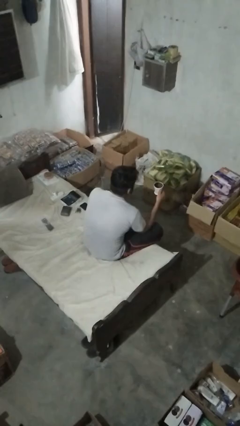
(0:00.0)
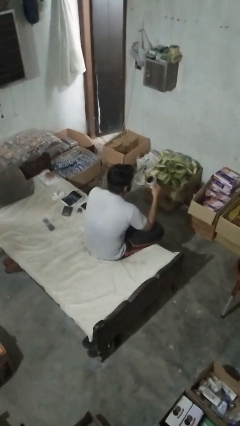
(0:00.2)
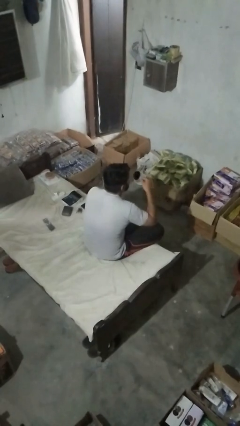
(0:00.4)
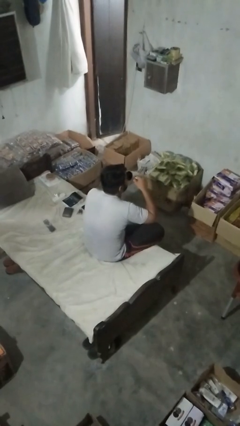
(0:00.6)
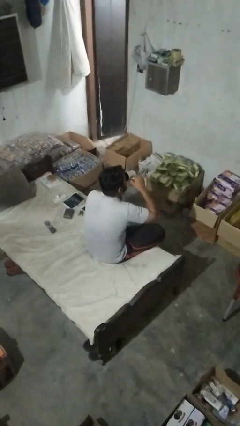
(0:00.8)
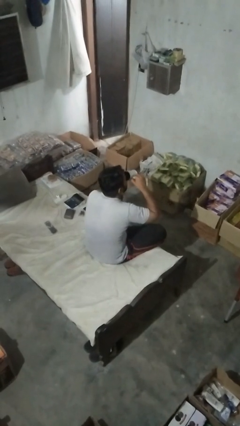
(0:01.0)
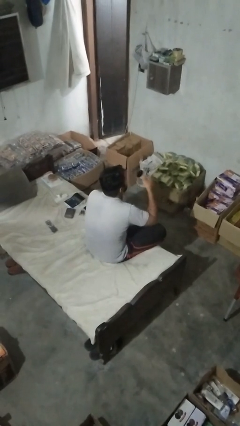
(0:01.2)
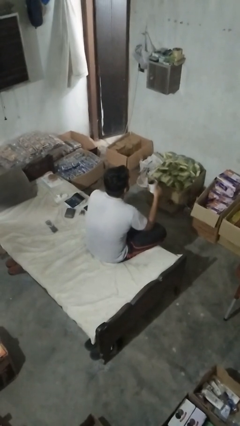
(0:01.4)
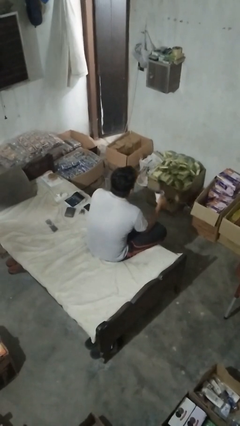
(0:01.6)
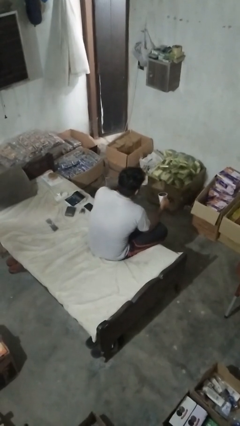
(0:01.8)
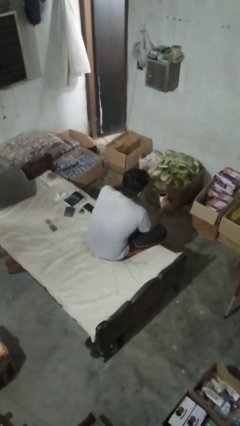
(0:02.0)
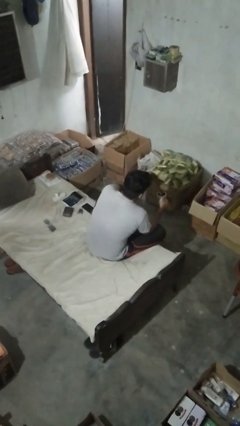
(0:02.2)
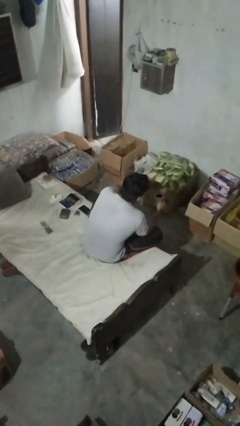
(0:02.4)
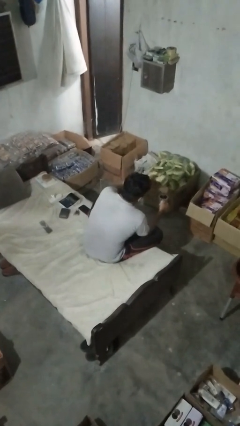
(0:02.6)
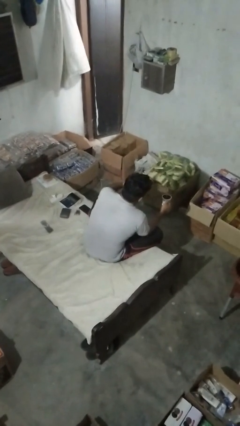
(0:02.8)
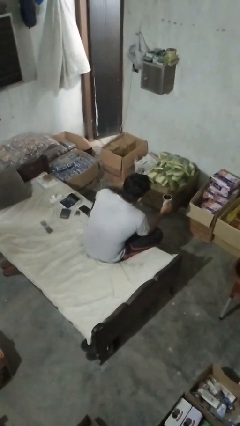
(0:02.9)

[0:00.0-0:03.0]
person drinks from mug

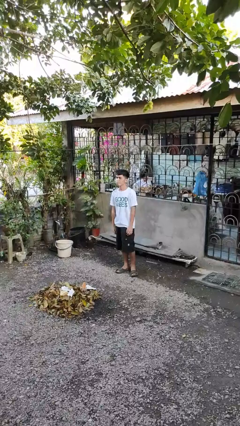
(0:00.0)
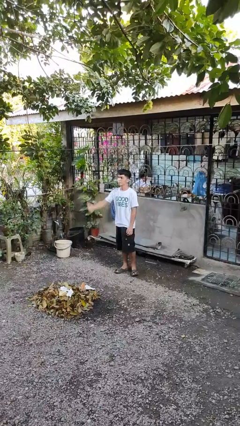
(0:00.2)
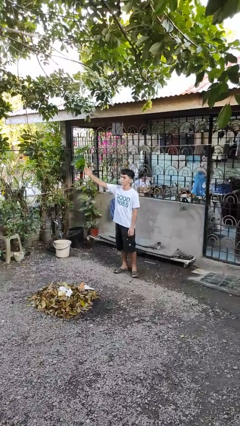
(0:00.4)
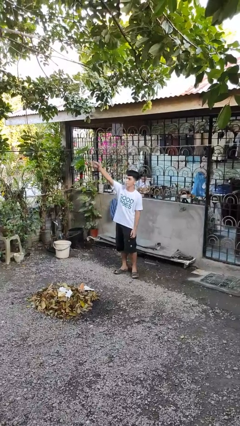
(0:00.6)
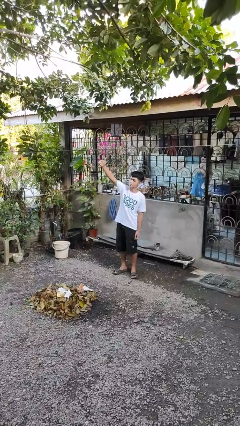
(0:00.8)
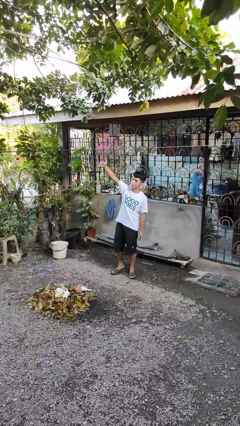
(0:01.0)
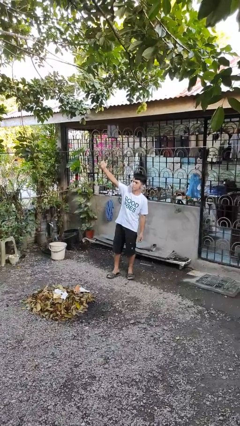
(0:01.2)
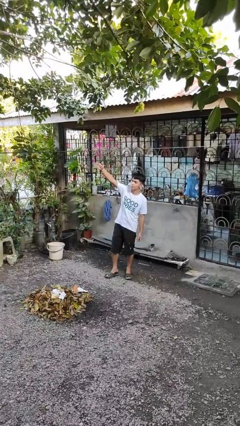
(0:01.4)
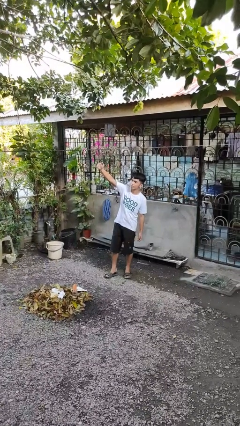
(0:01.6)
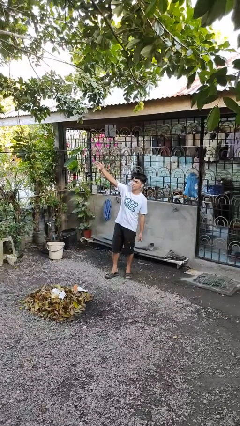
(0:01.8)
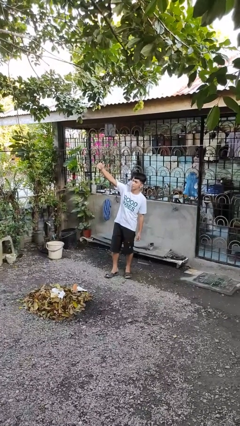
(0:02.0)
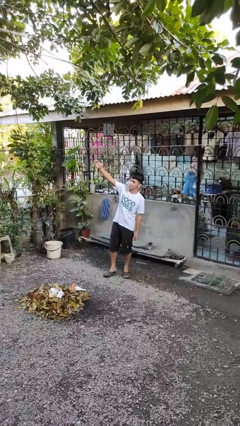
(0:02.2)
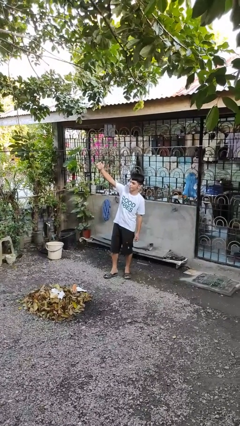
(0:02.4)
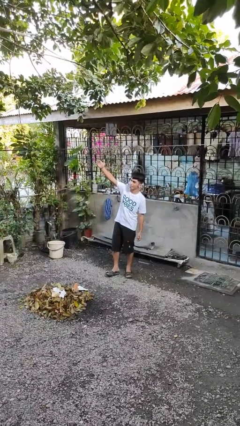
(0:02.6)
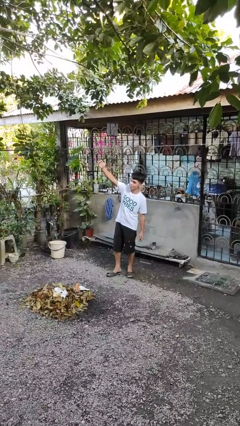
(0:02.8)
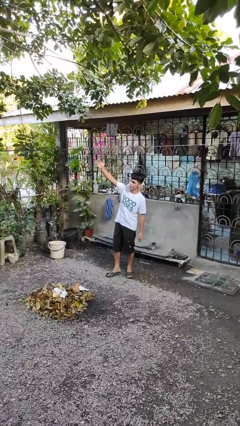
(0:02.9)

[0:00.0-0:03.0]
person gestures come here

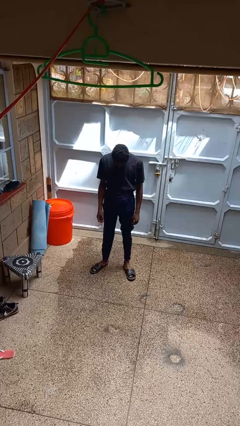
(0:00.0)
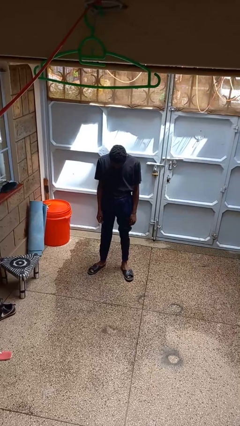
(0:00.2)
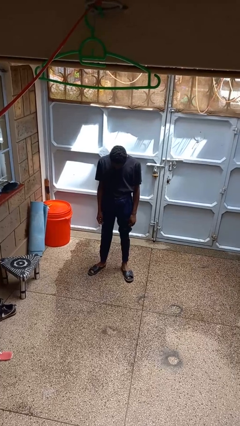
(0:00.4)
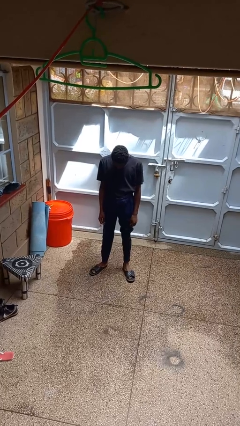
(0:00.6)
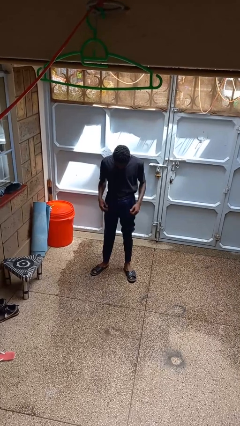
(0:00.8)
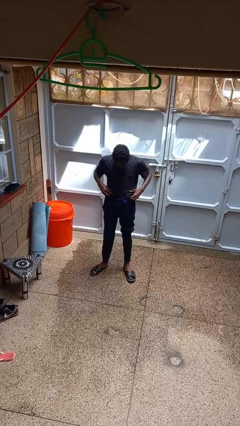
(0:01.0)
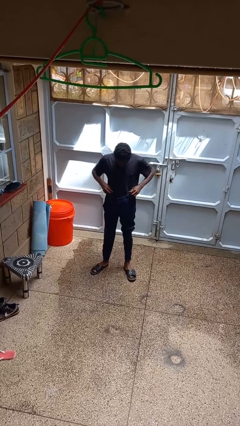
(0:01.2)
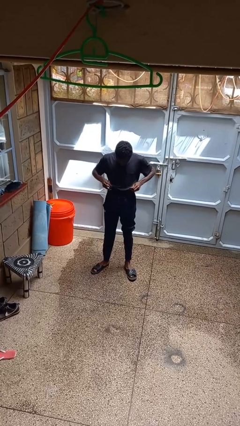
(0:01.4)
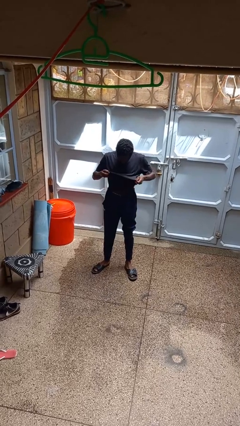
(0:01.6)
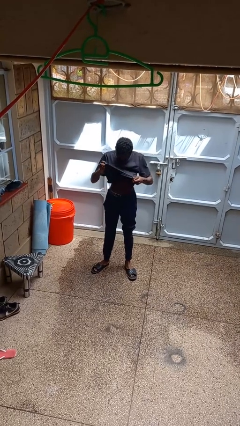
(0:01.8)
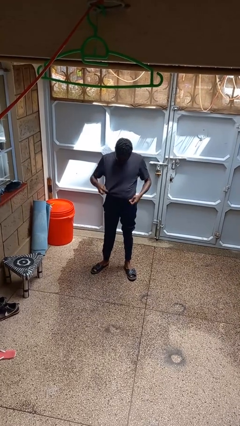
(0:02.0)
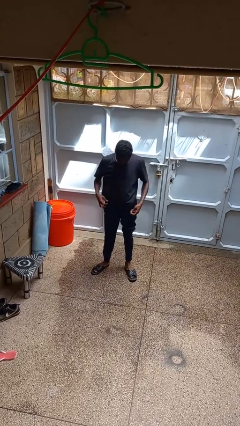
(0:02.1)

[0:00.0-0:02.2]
person untucks shirt

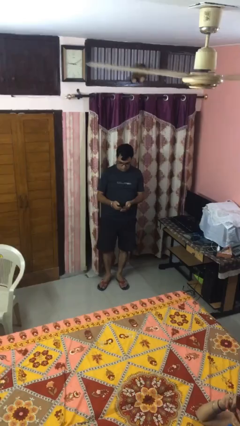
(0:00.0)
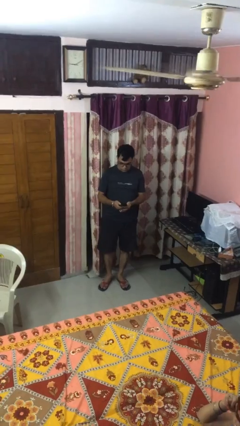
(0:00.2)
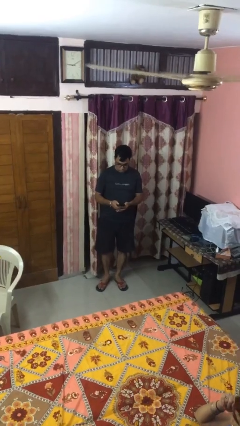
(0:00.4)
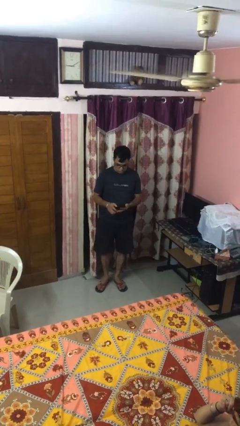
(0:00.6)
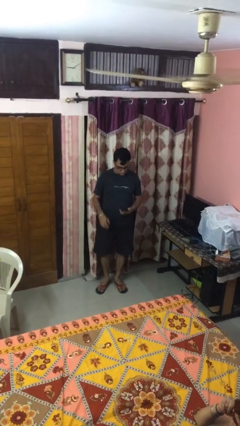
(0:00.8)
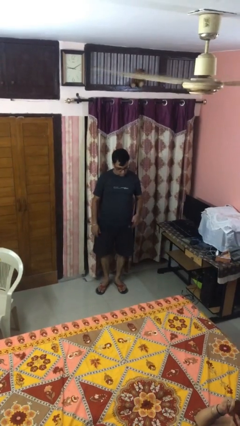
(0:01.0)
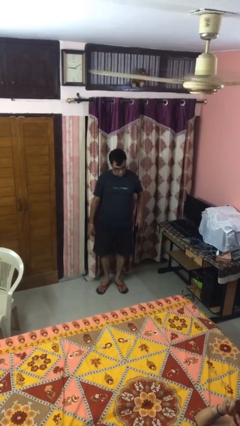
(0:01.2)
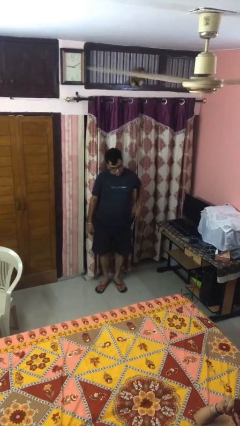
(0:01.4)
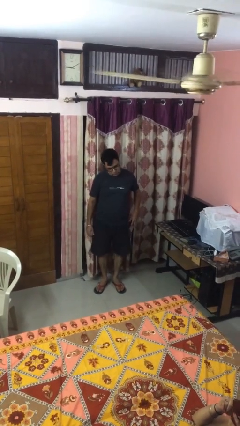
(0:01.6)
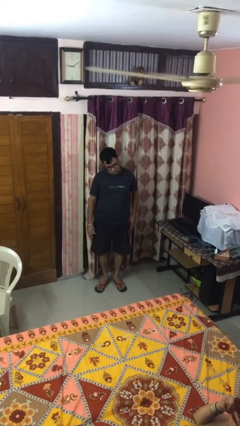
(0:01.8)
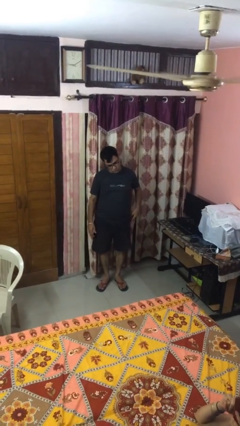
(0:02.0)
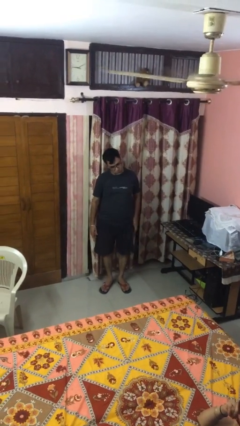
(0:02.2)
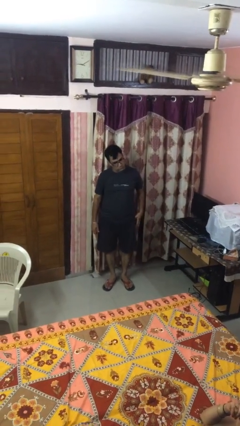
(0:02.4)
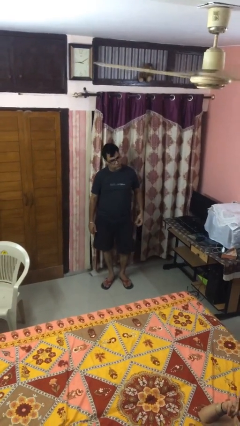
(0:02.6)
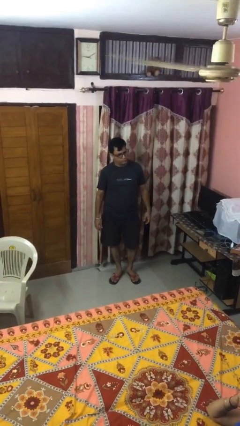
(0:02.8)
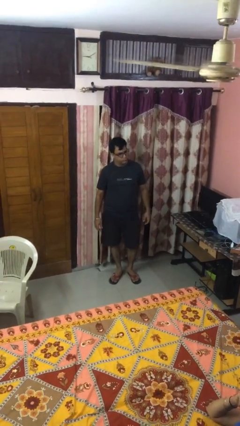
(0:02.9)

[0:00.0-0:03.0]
person puts phone into pocket

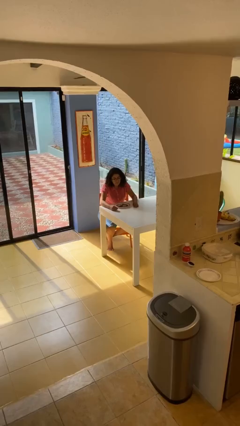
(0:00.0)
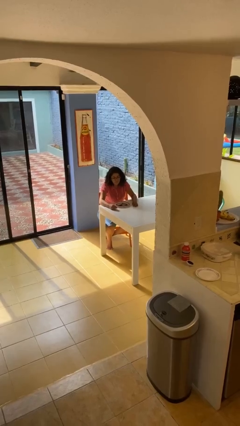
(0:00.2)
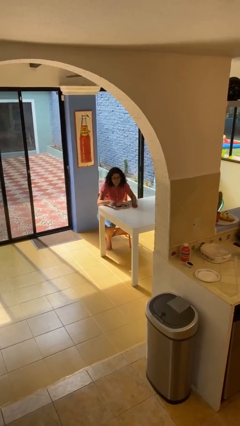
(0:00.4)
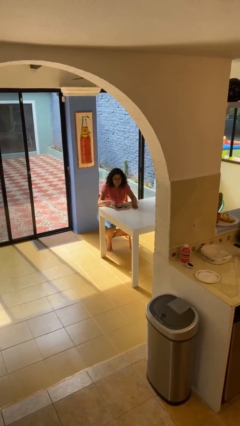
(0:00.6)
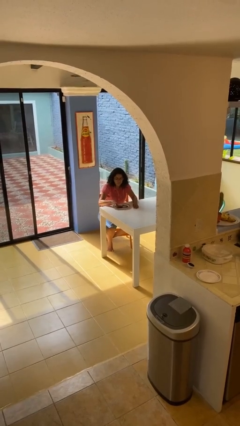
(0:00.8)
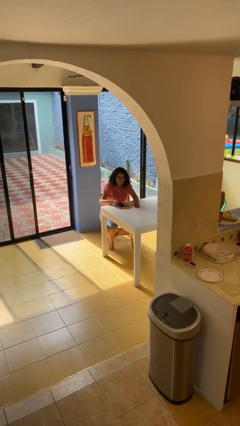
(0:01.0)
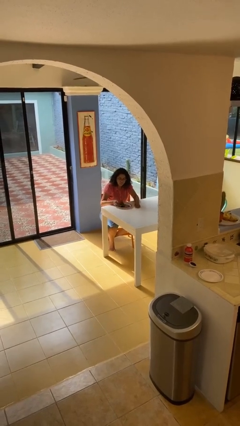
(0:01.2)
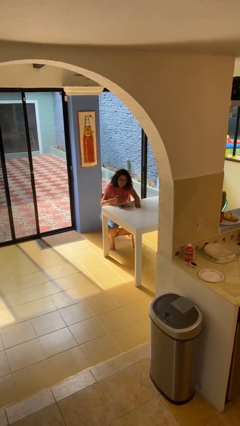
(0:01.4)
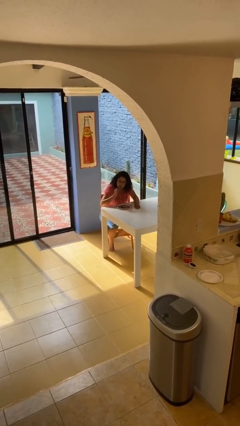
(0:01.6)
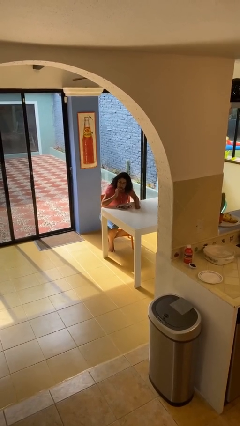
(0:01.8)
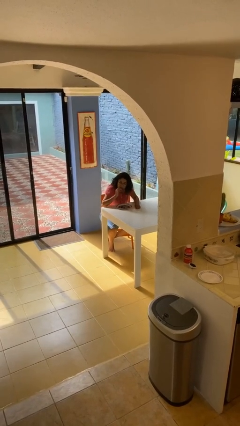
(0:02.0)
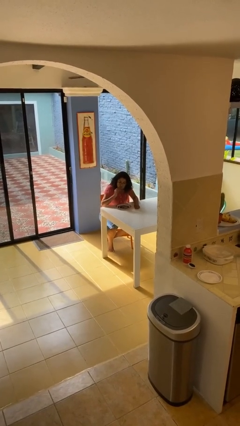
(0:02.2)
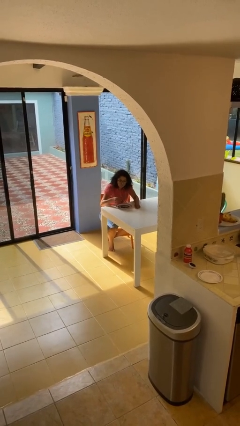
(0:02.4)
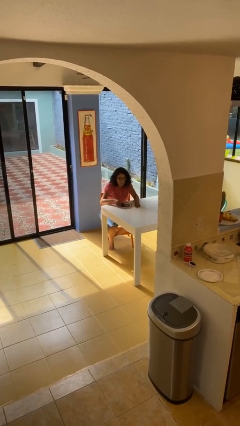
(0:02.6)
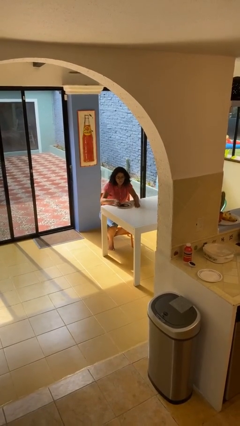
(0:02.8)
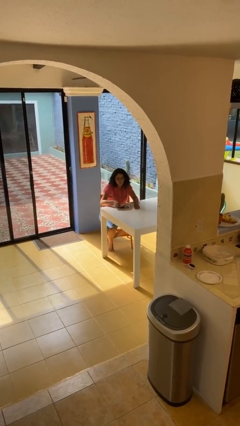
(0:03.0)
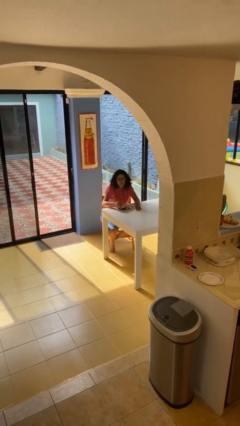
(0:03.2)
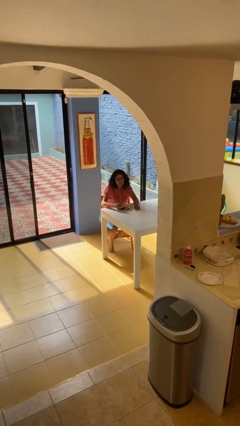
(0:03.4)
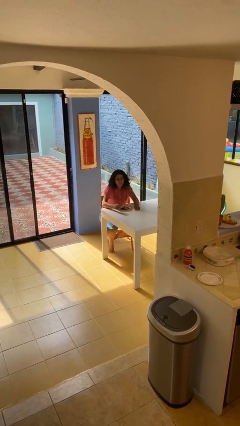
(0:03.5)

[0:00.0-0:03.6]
person eats with hands

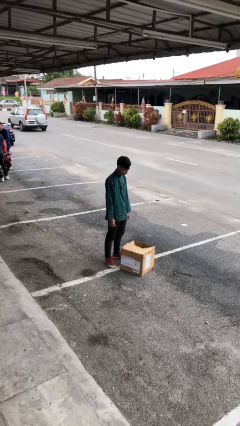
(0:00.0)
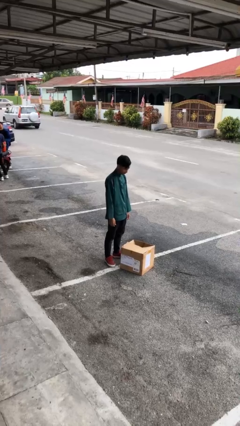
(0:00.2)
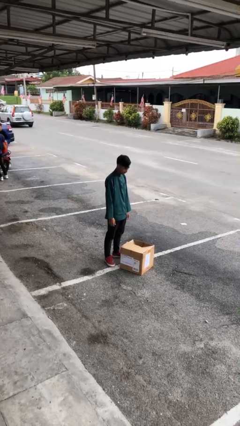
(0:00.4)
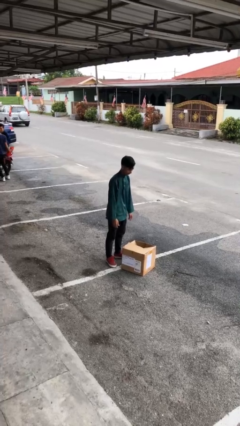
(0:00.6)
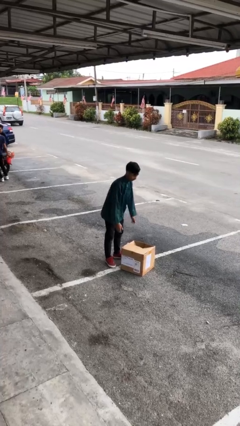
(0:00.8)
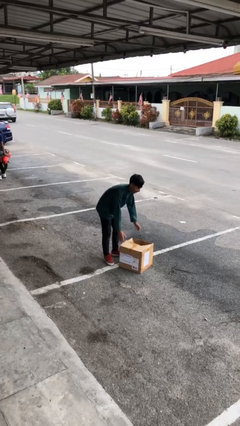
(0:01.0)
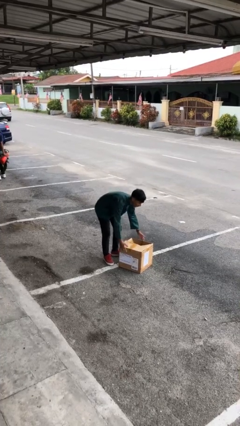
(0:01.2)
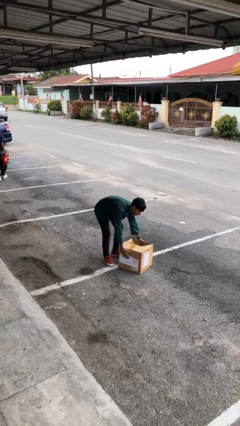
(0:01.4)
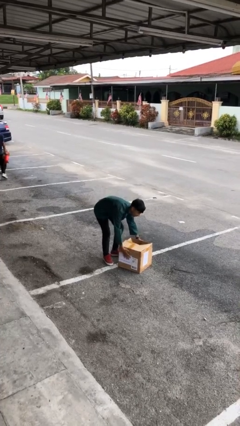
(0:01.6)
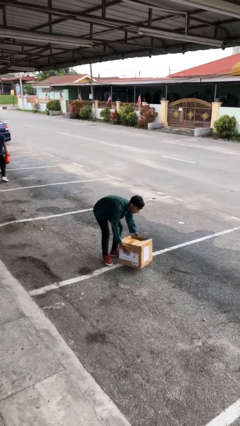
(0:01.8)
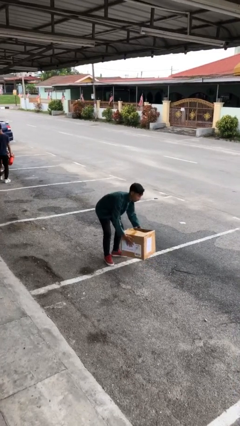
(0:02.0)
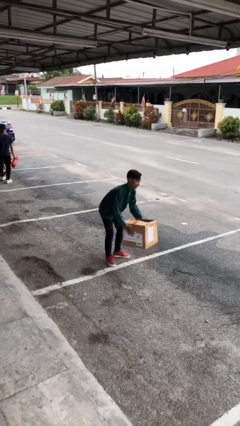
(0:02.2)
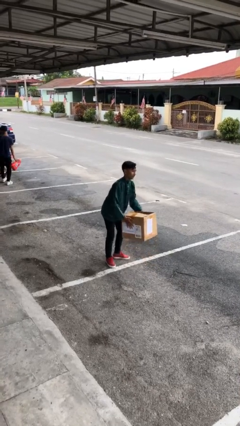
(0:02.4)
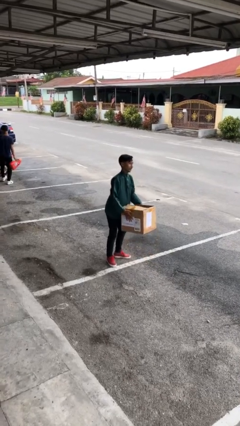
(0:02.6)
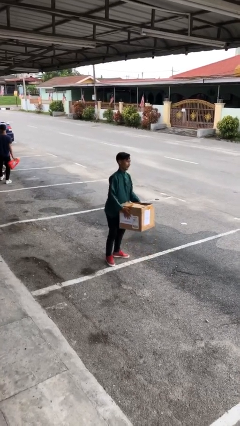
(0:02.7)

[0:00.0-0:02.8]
person picks up object from floor
